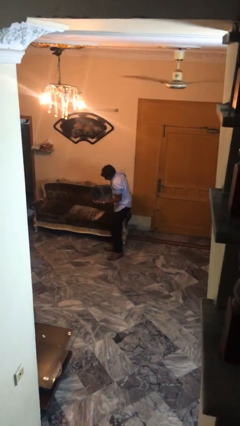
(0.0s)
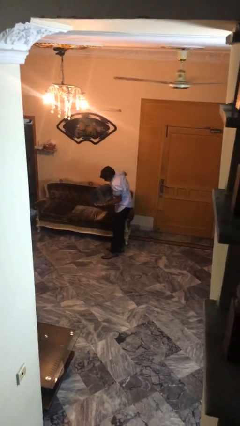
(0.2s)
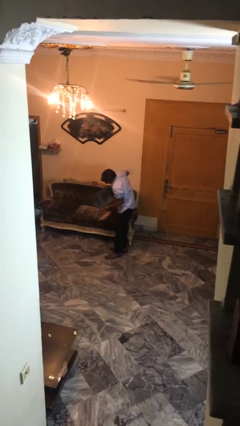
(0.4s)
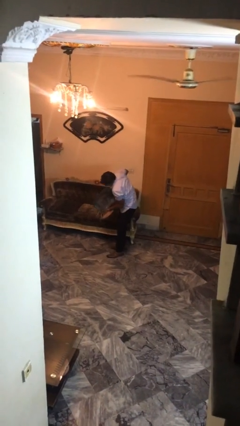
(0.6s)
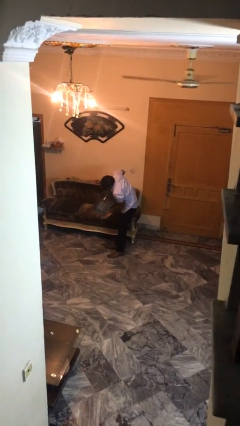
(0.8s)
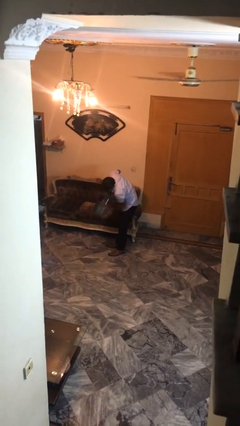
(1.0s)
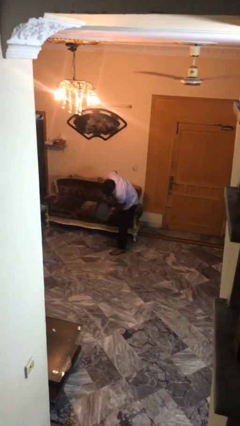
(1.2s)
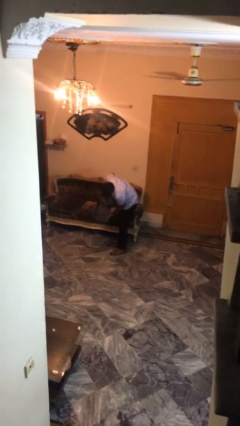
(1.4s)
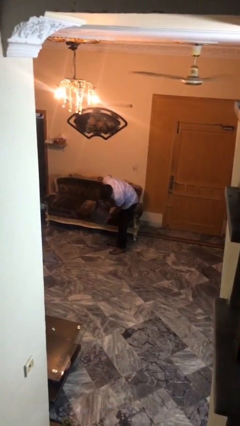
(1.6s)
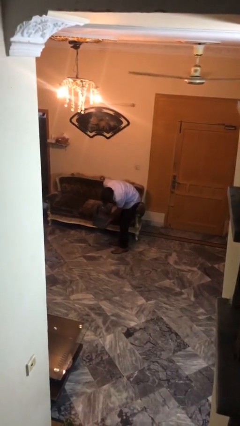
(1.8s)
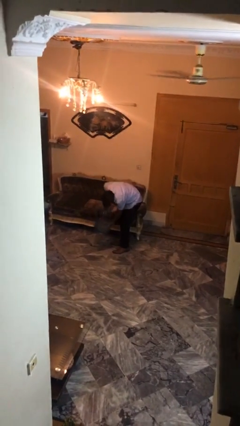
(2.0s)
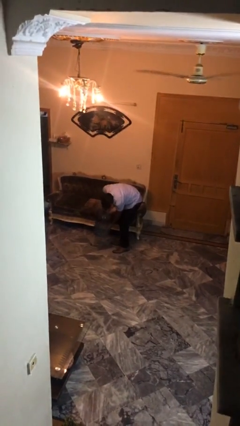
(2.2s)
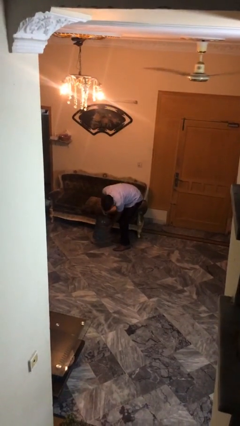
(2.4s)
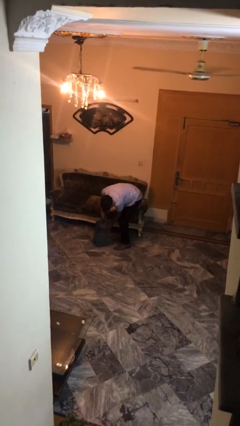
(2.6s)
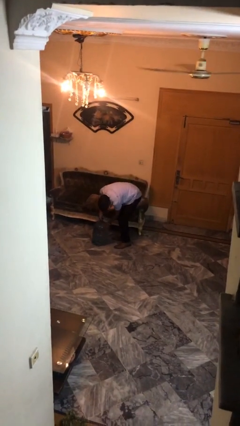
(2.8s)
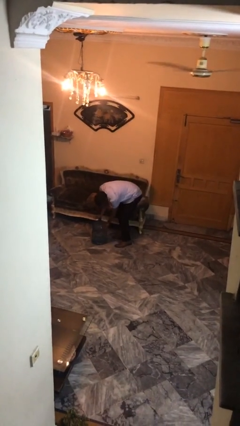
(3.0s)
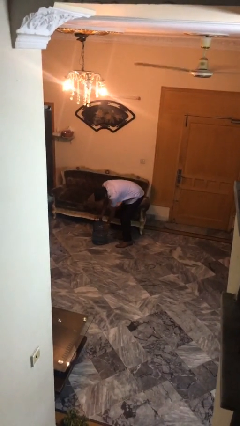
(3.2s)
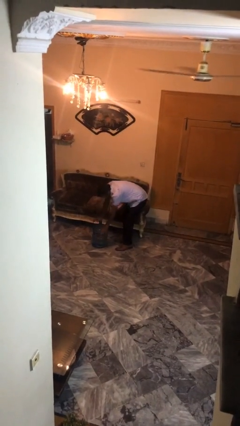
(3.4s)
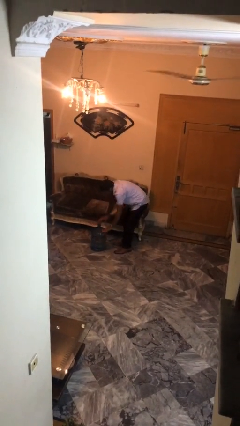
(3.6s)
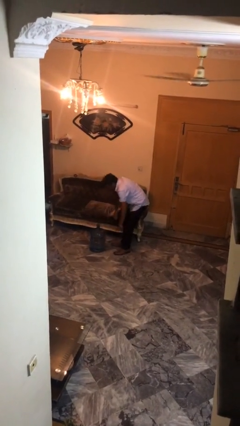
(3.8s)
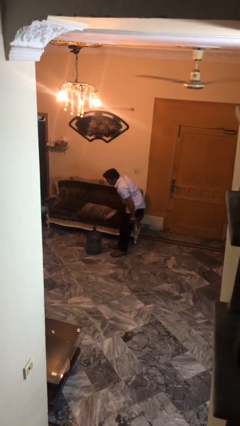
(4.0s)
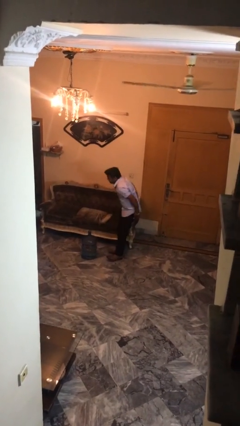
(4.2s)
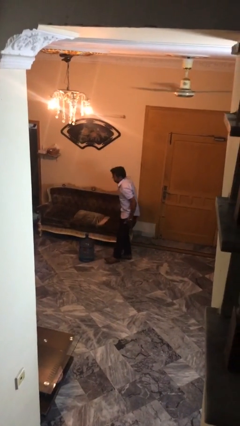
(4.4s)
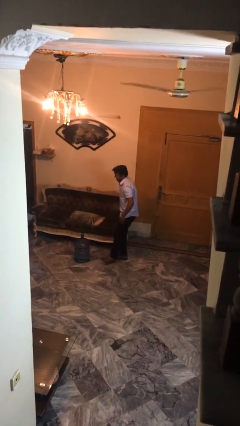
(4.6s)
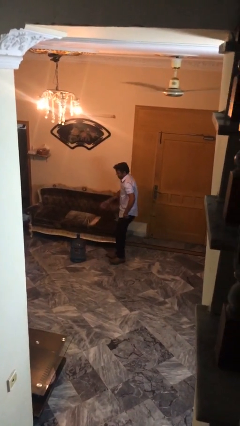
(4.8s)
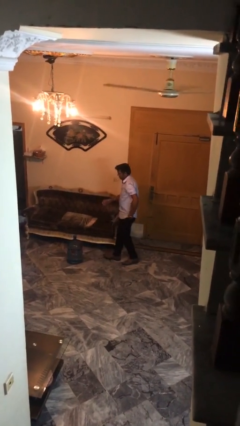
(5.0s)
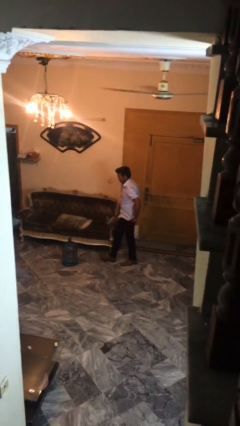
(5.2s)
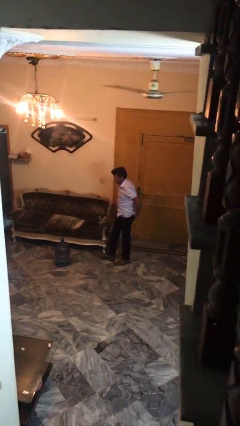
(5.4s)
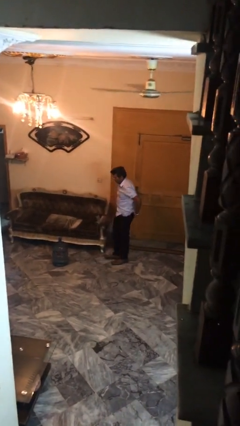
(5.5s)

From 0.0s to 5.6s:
person puts down object on floor

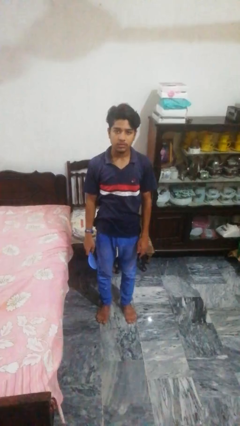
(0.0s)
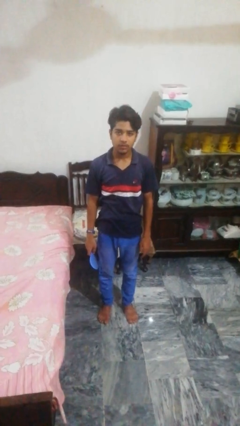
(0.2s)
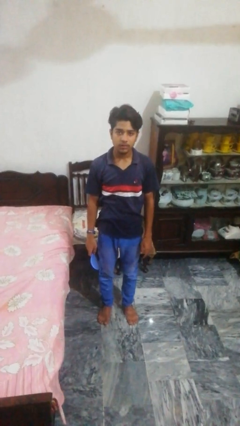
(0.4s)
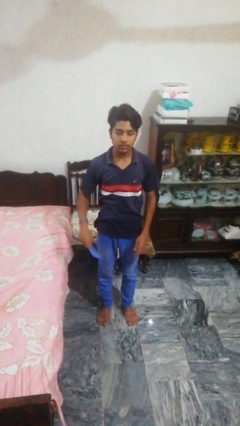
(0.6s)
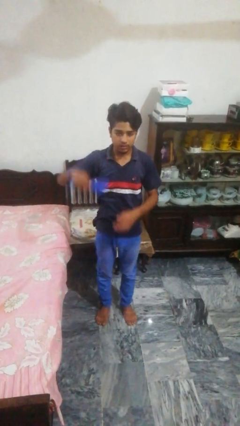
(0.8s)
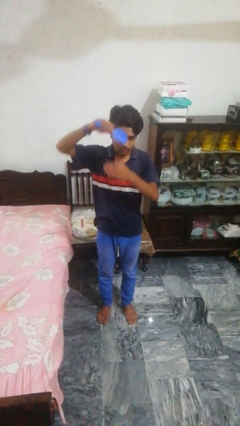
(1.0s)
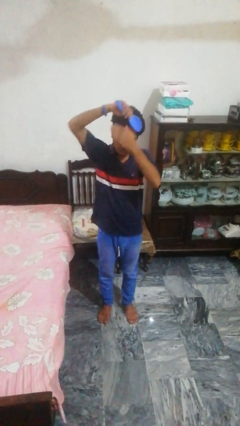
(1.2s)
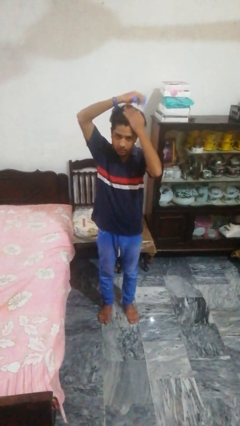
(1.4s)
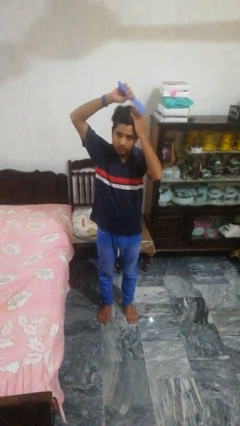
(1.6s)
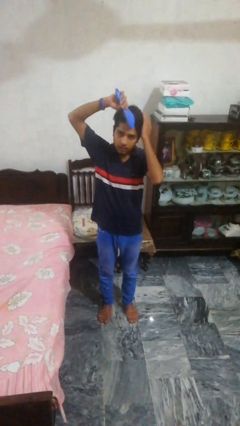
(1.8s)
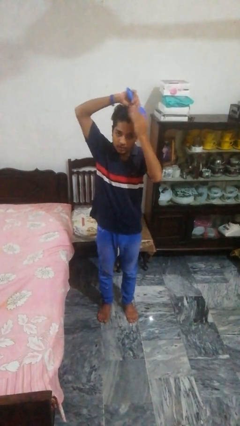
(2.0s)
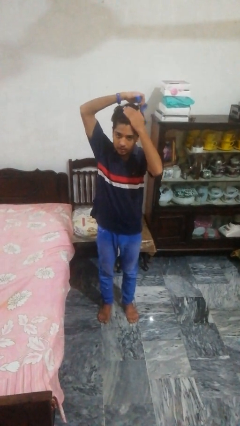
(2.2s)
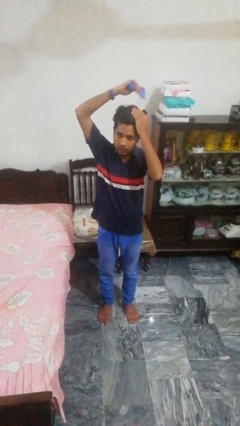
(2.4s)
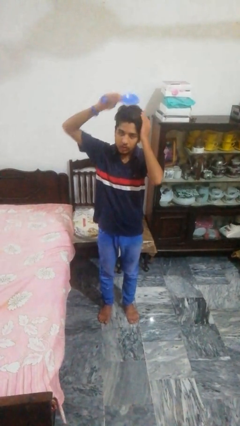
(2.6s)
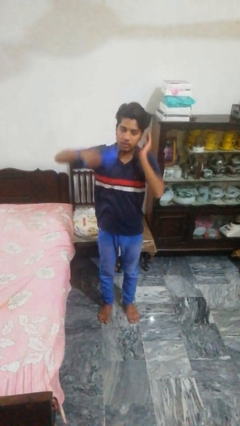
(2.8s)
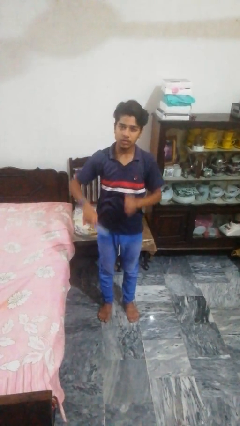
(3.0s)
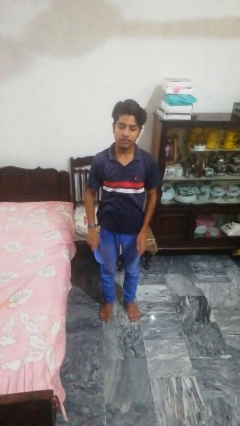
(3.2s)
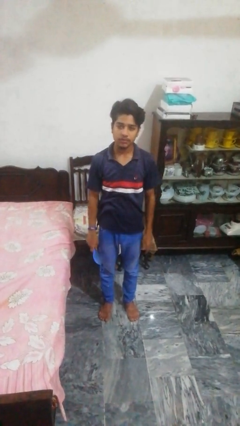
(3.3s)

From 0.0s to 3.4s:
person brushes hair

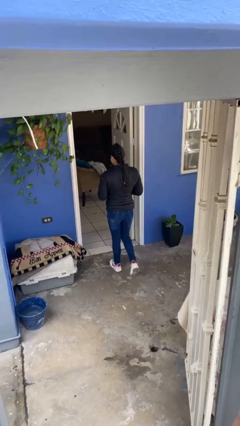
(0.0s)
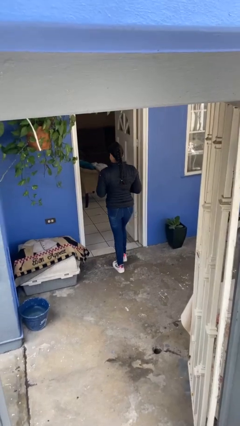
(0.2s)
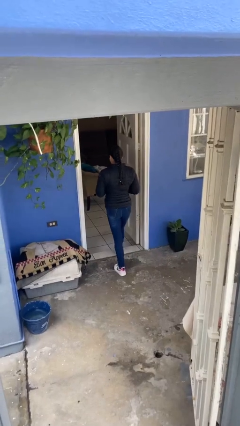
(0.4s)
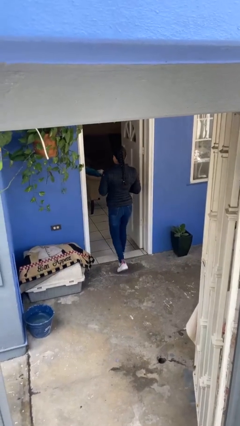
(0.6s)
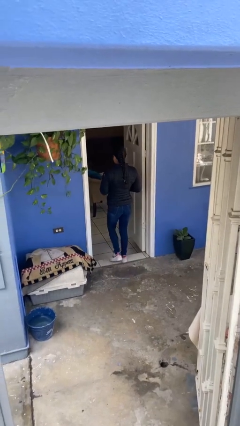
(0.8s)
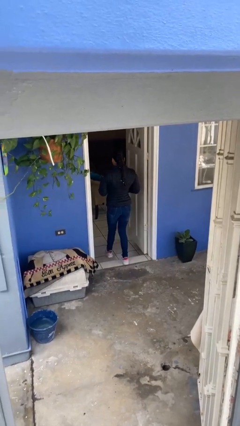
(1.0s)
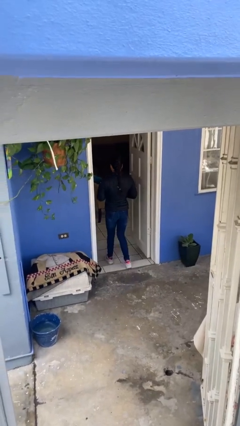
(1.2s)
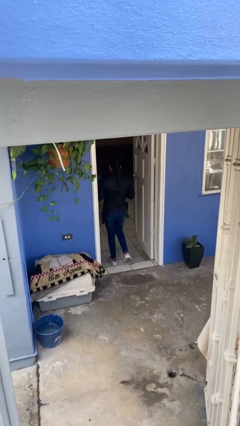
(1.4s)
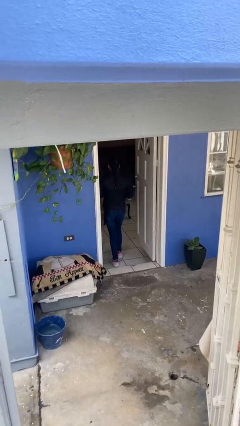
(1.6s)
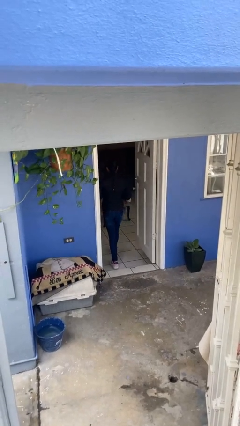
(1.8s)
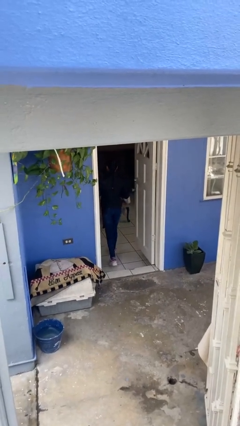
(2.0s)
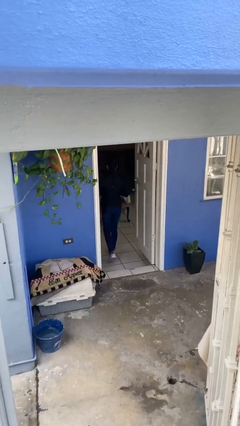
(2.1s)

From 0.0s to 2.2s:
person exits scene through structure

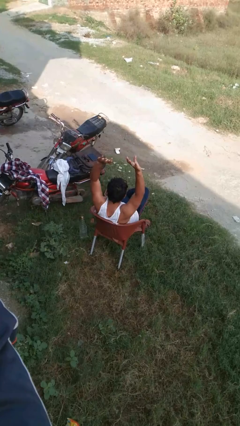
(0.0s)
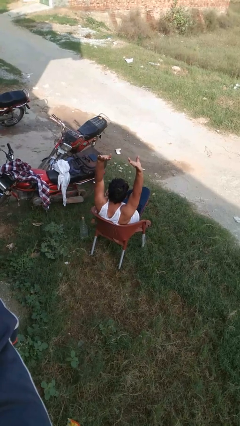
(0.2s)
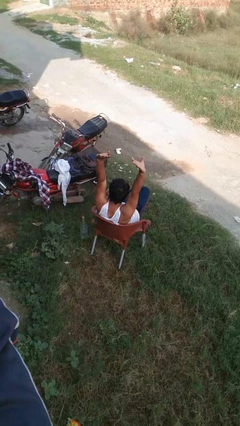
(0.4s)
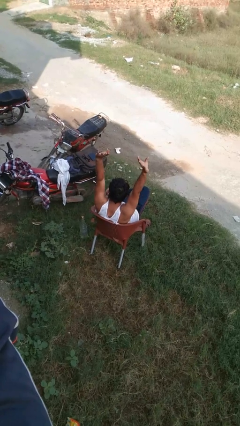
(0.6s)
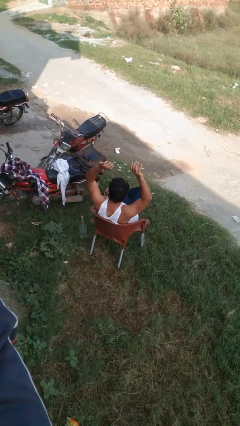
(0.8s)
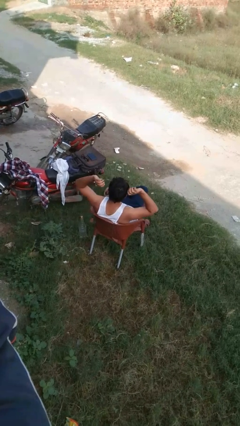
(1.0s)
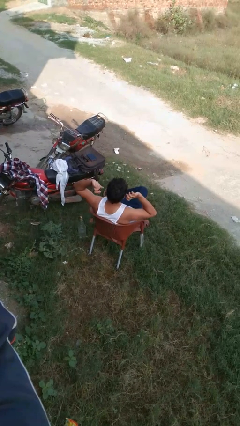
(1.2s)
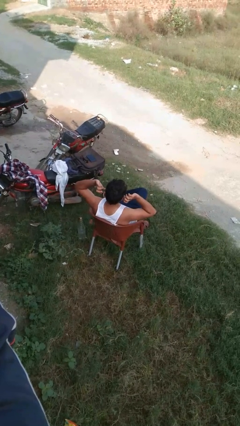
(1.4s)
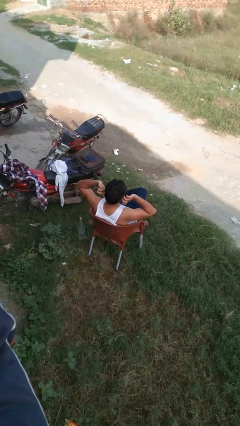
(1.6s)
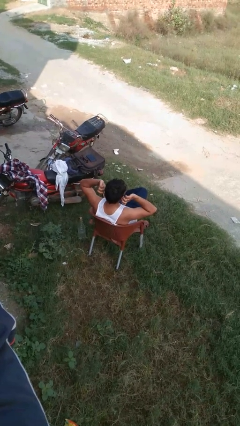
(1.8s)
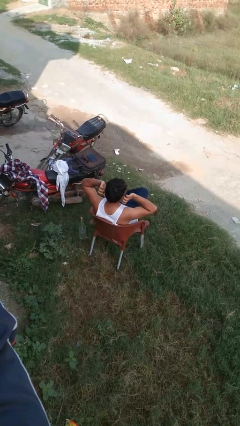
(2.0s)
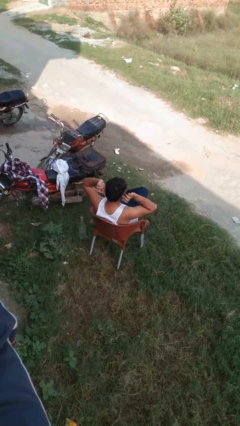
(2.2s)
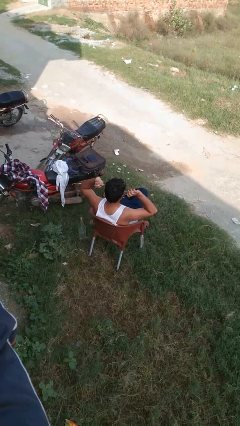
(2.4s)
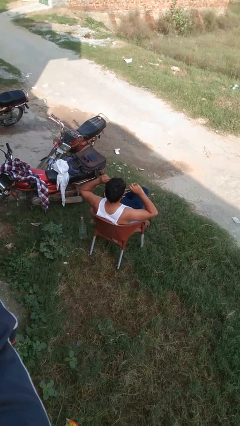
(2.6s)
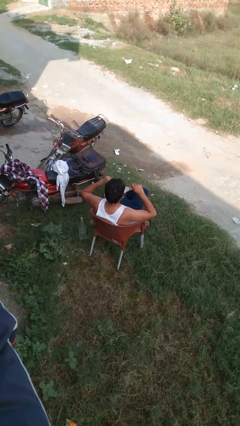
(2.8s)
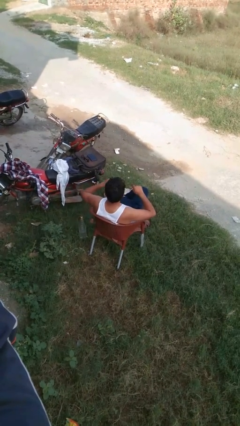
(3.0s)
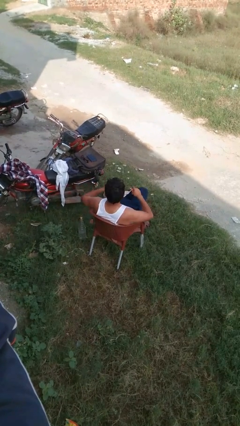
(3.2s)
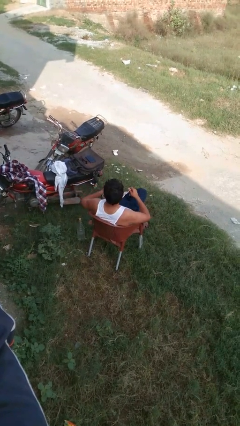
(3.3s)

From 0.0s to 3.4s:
person takes off facemask

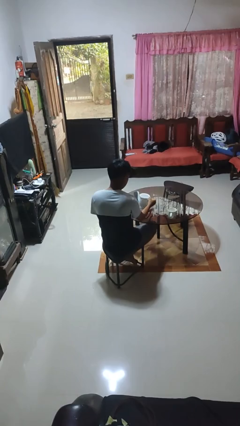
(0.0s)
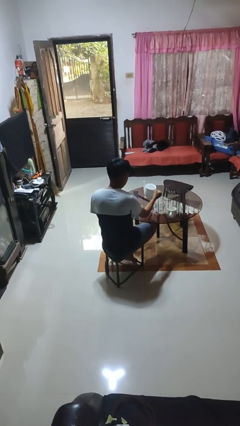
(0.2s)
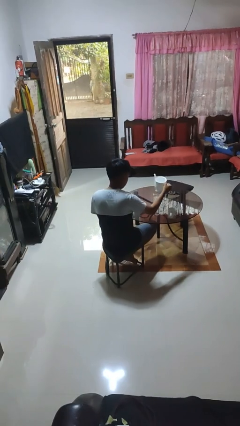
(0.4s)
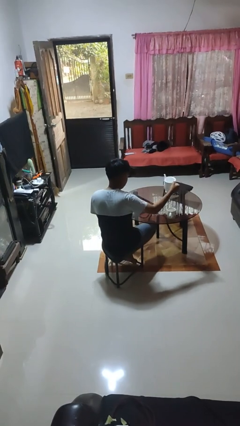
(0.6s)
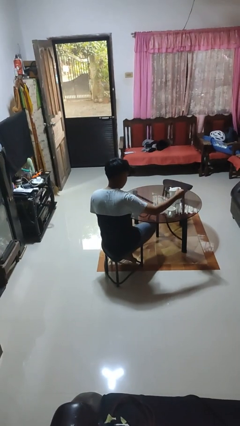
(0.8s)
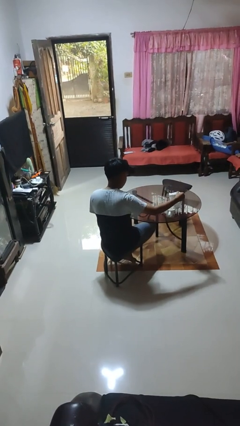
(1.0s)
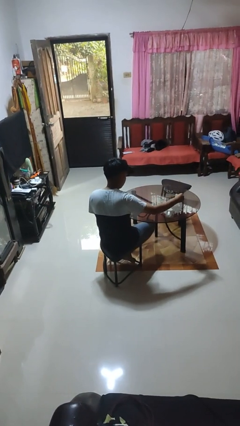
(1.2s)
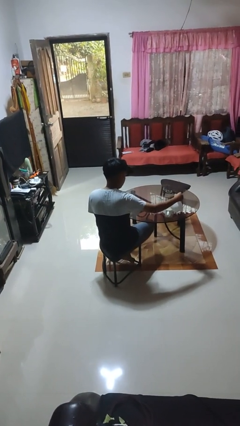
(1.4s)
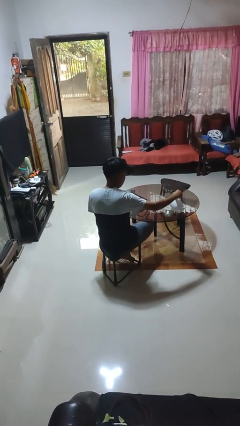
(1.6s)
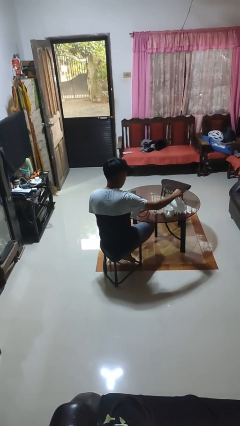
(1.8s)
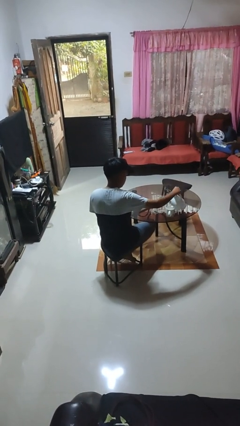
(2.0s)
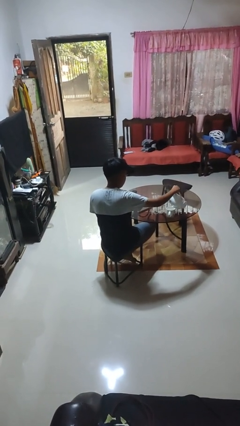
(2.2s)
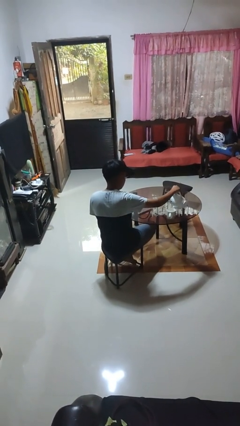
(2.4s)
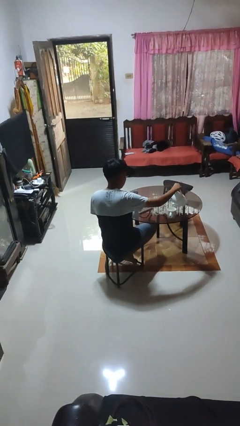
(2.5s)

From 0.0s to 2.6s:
person pours coffee into mug
